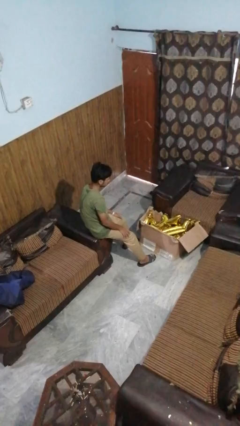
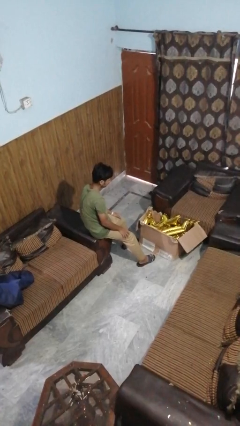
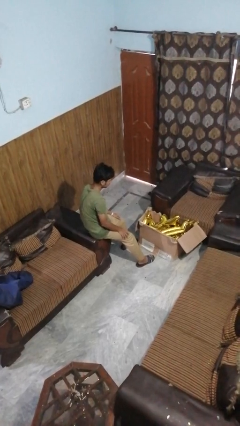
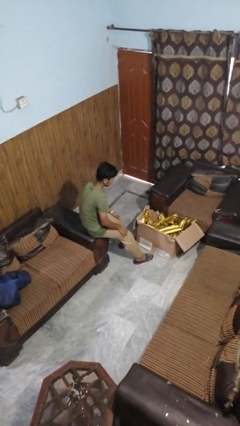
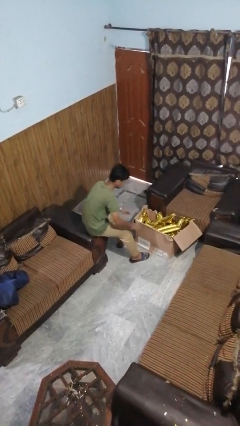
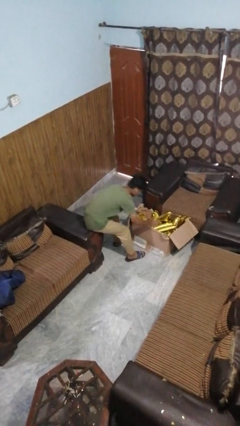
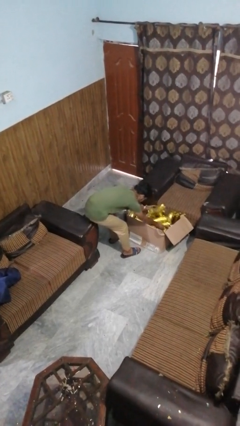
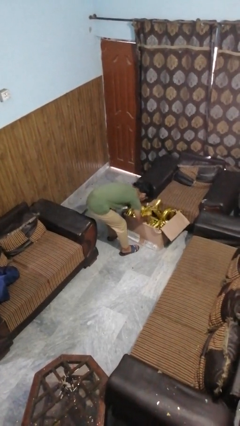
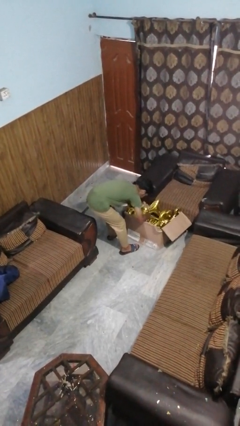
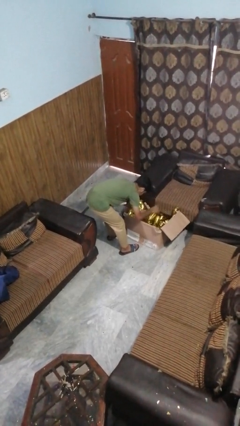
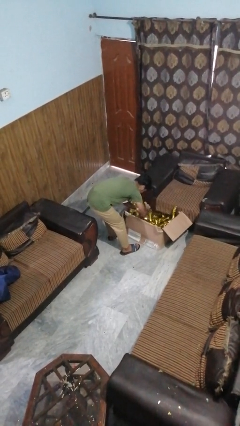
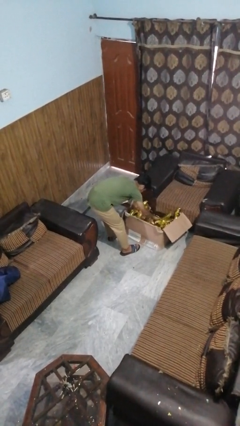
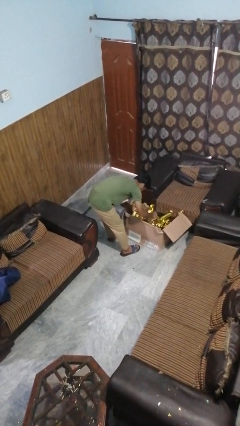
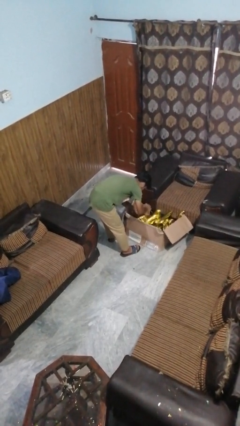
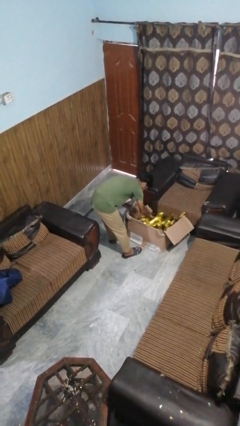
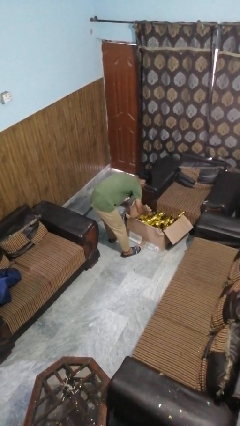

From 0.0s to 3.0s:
person searches in box

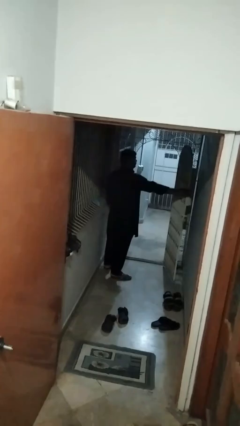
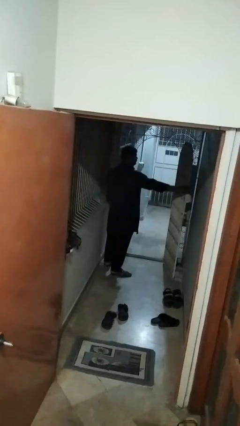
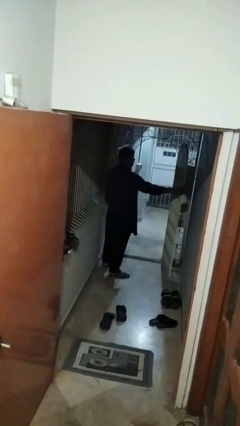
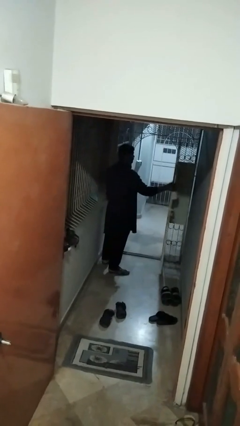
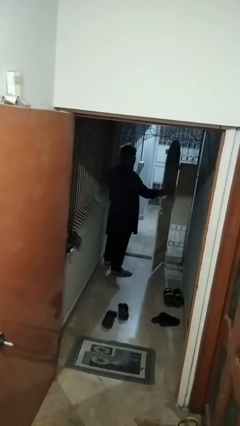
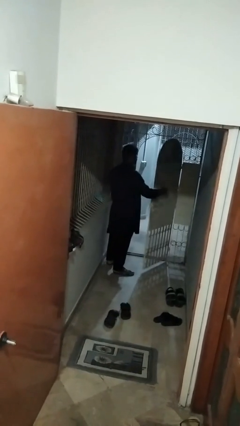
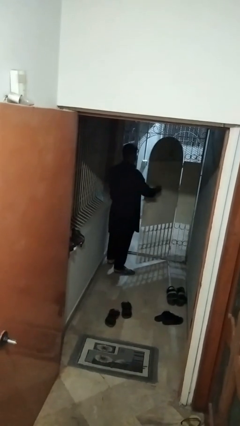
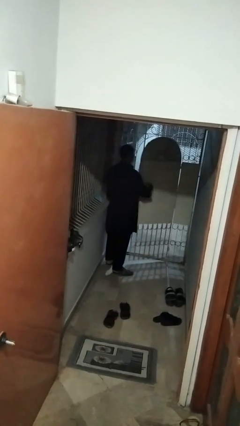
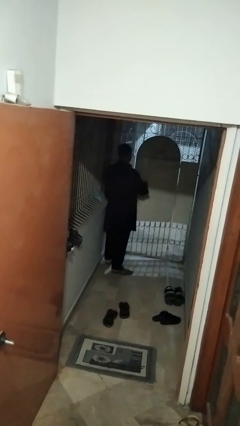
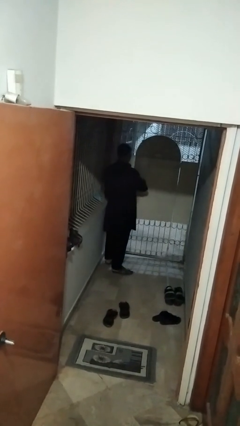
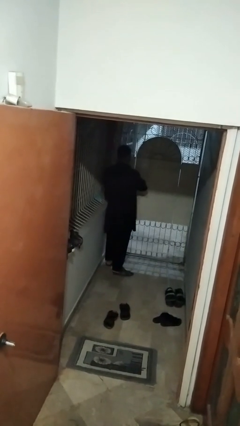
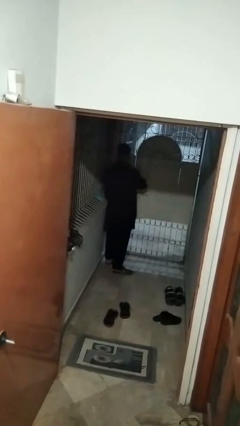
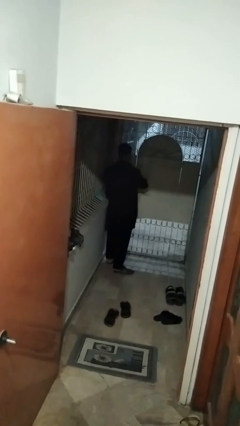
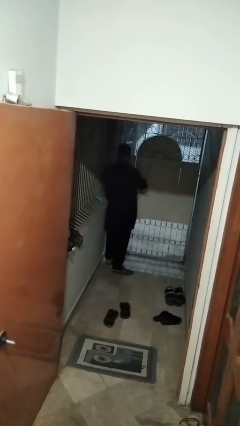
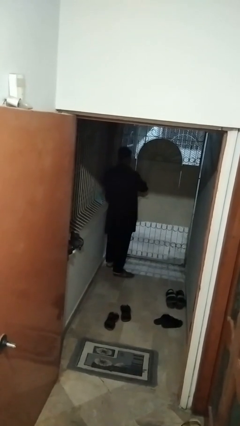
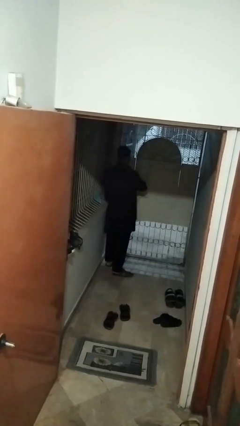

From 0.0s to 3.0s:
person closes gate

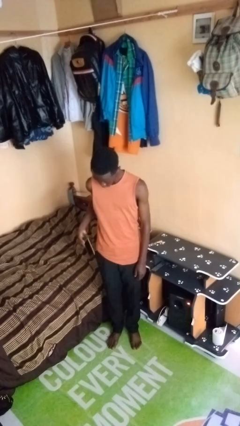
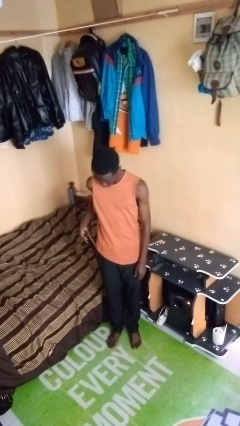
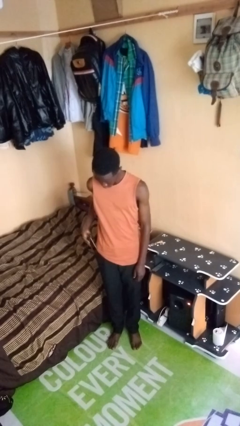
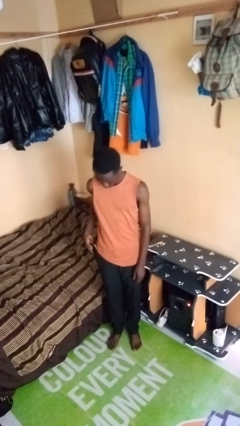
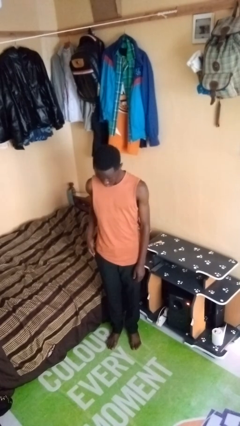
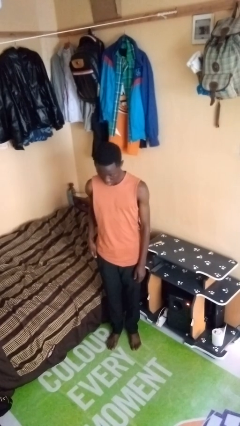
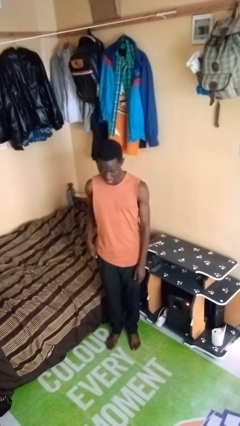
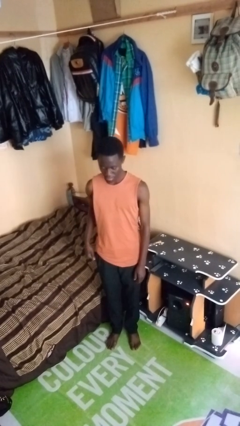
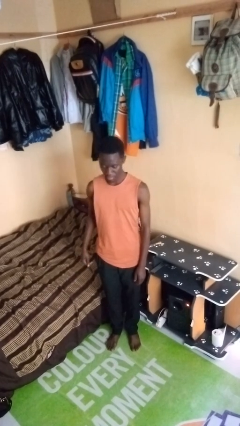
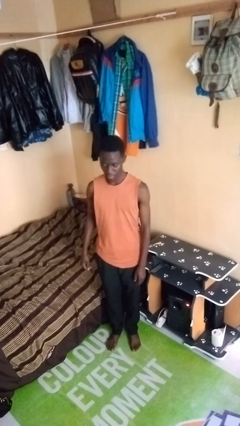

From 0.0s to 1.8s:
person puts phone into pocket

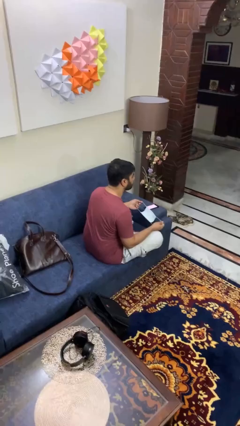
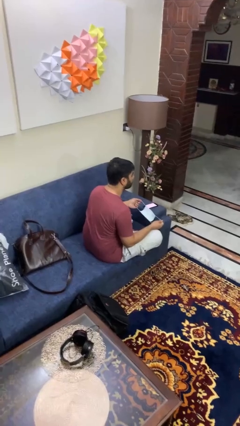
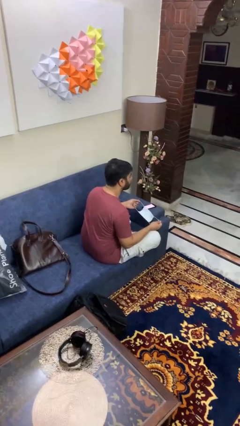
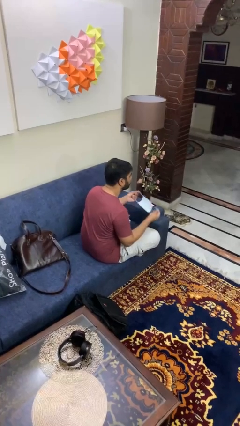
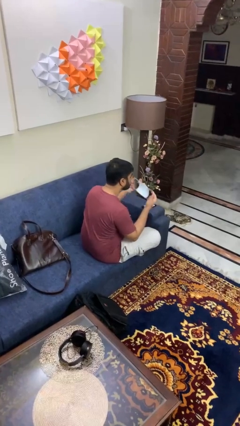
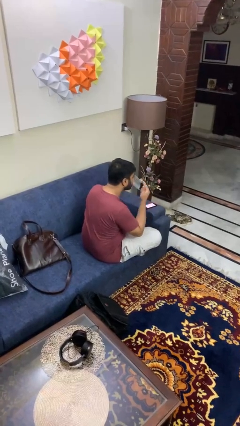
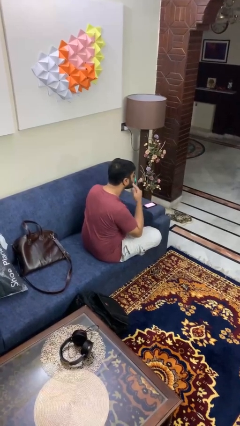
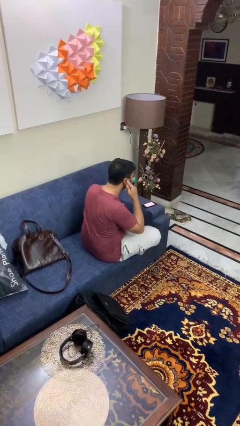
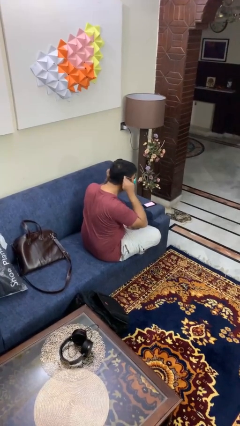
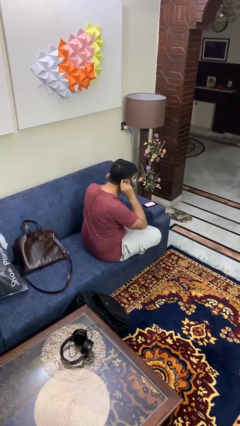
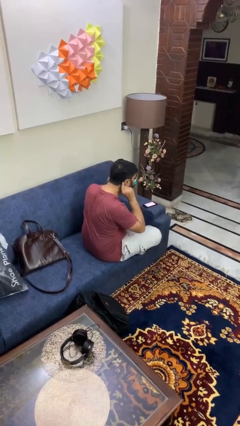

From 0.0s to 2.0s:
person puts on facemask

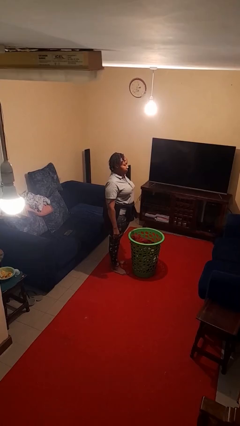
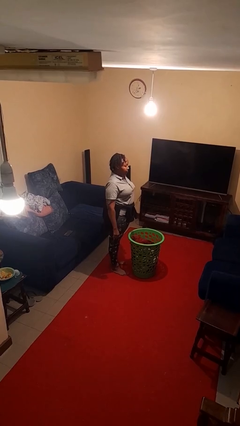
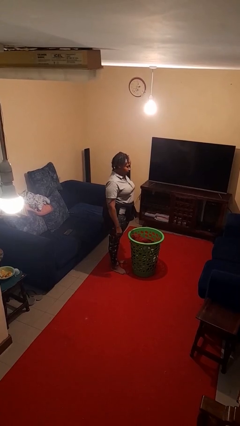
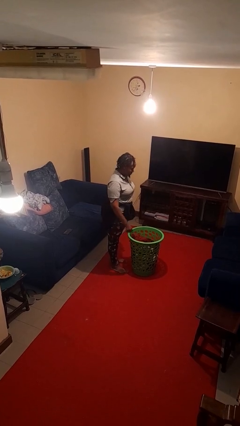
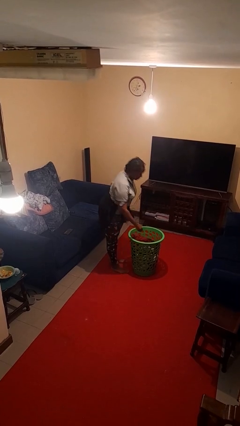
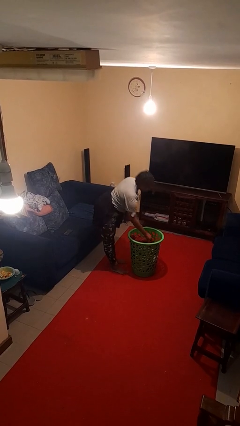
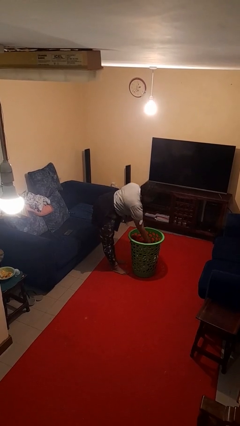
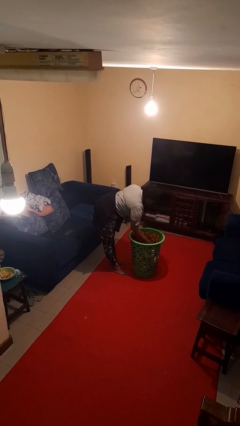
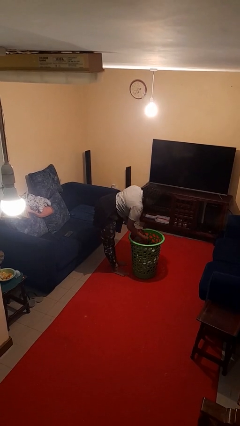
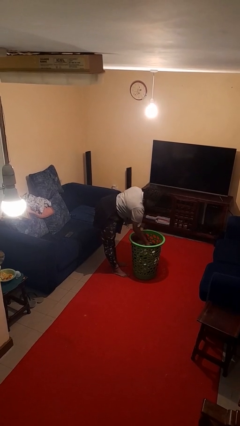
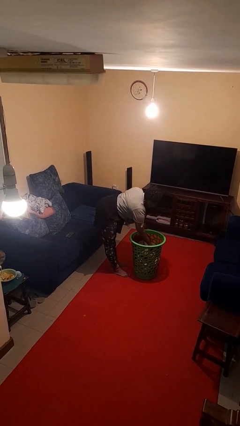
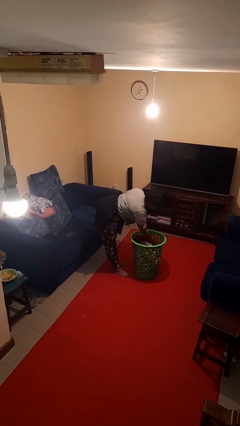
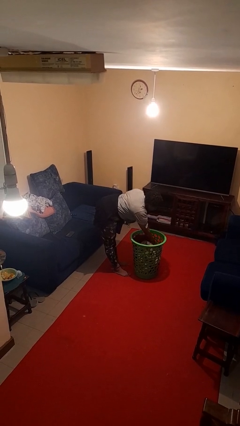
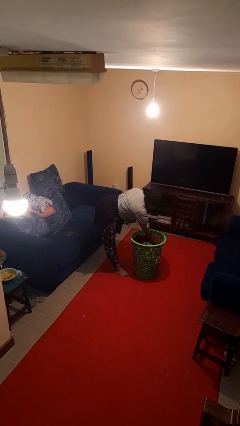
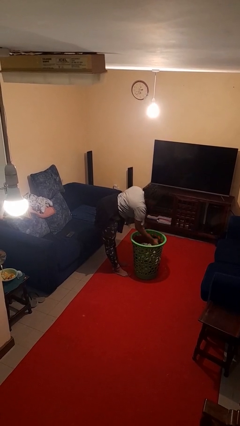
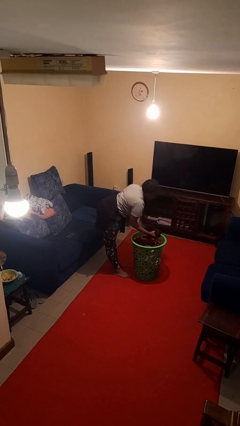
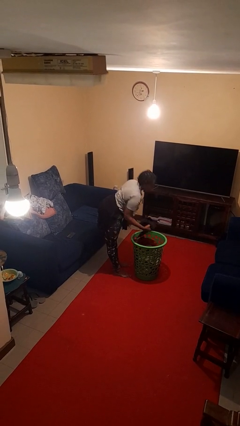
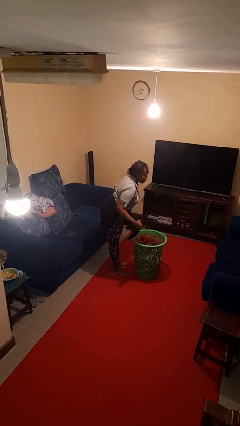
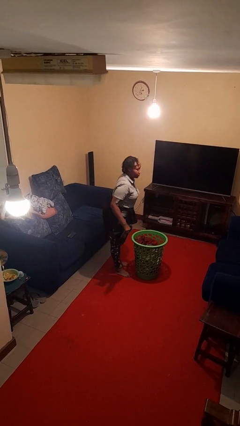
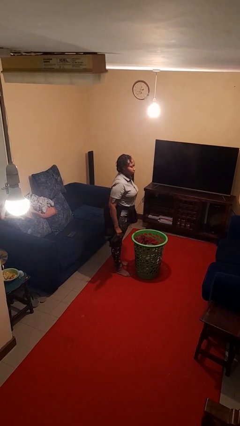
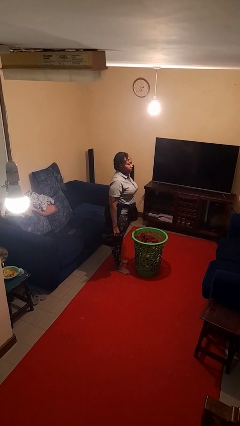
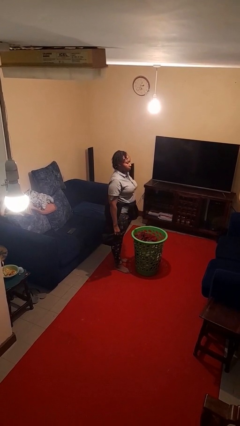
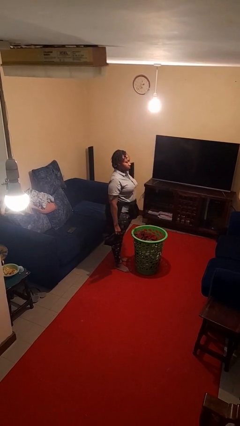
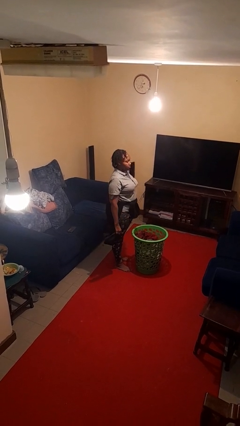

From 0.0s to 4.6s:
person takes object from basket

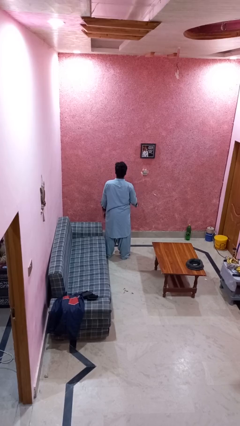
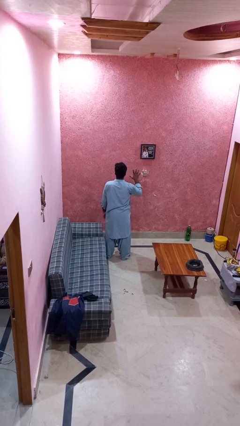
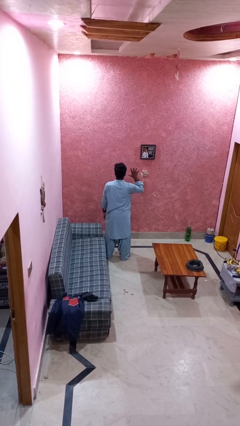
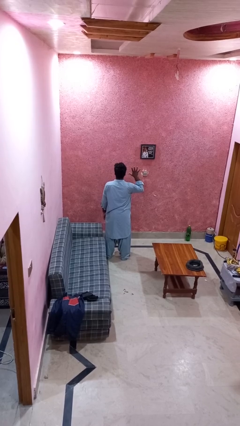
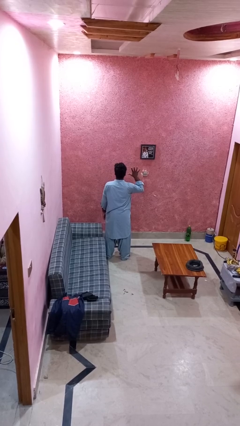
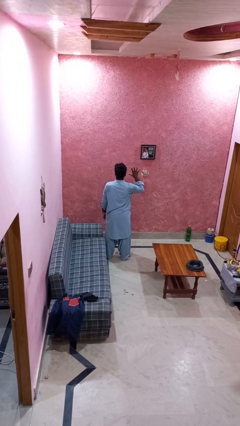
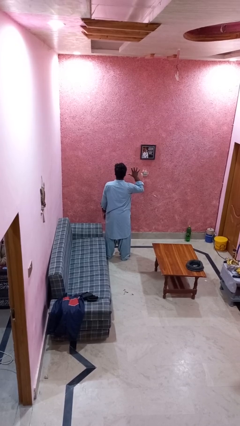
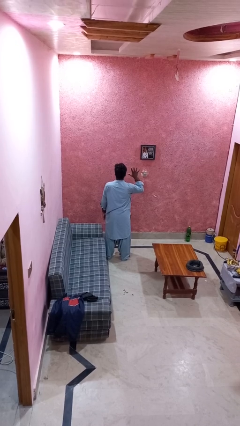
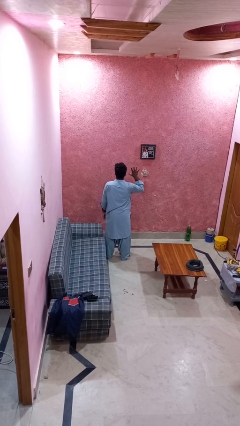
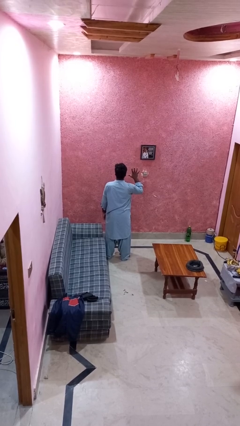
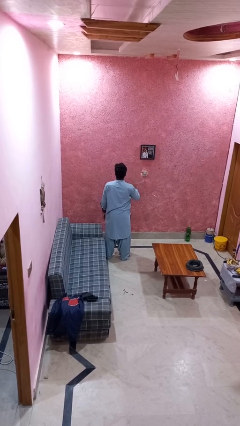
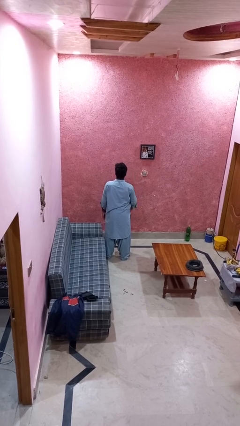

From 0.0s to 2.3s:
person gestures number five

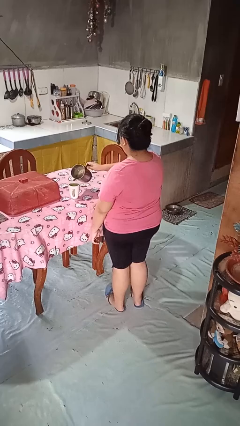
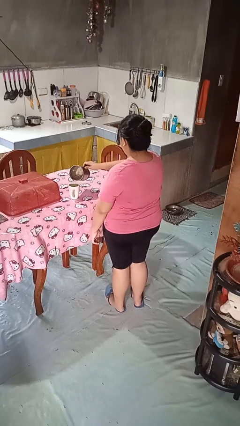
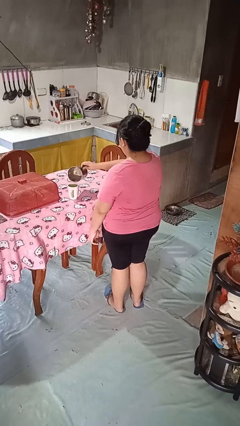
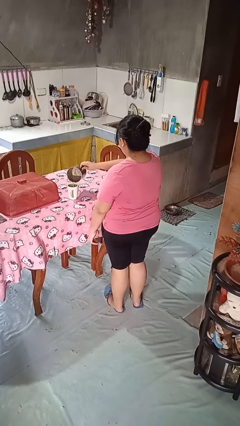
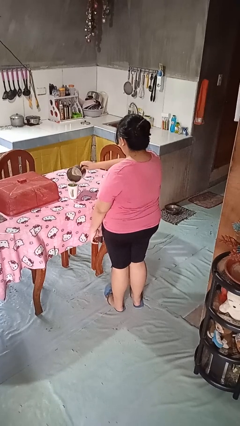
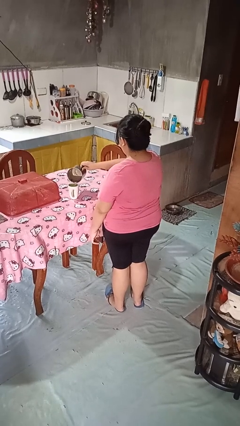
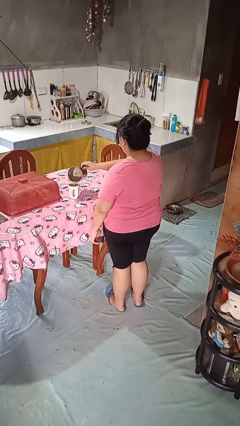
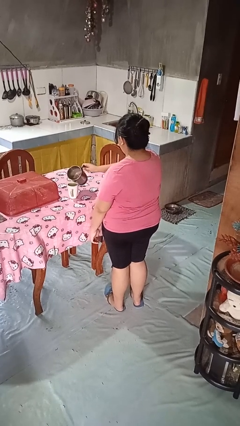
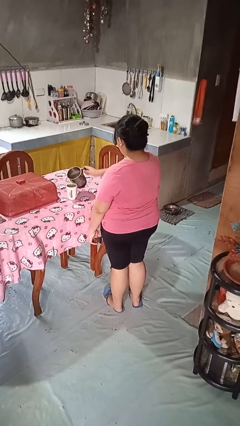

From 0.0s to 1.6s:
person pours coffee into mug
